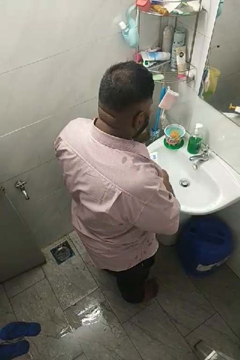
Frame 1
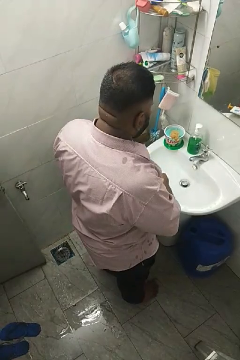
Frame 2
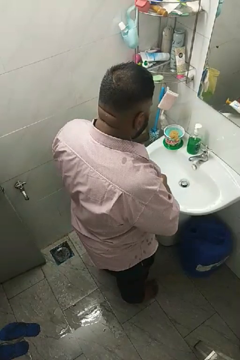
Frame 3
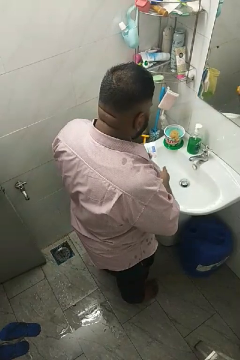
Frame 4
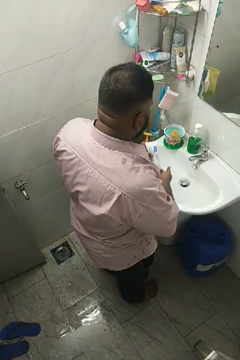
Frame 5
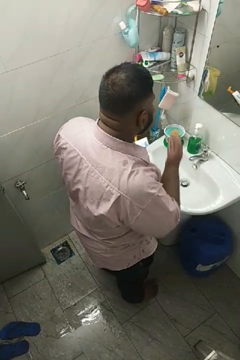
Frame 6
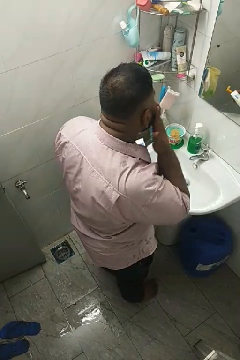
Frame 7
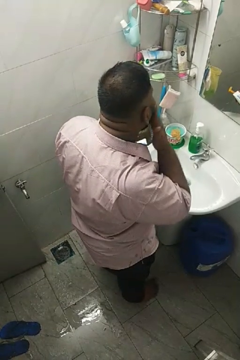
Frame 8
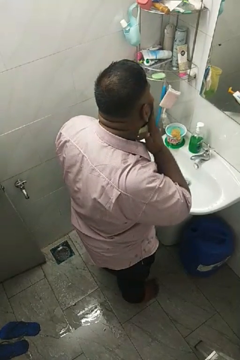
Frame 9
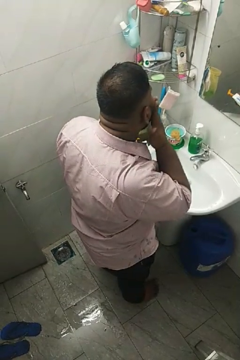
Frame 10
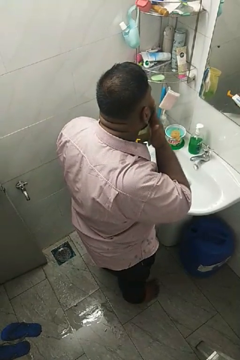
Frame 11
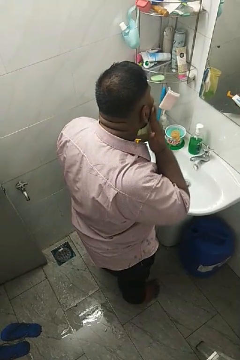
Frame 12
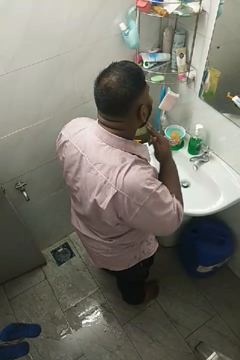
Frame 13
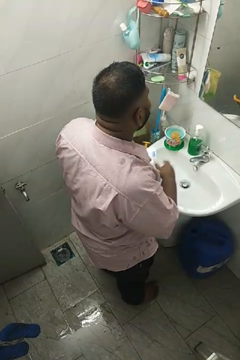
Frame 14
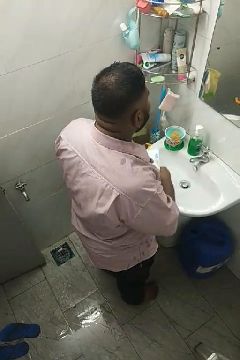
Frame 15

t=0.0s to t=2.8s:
person applies shaving cream

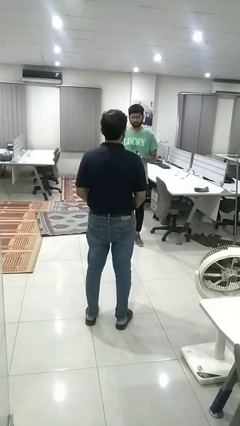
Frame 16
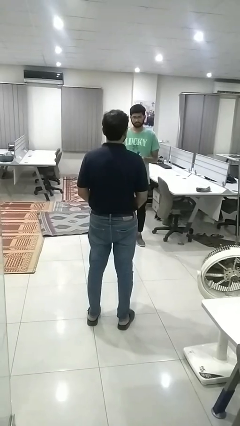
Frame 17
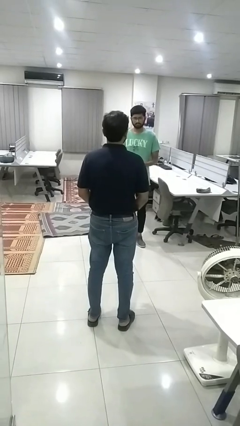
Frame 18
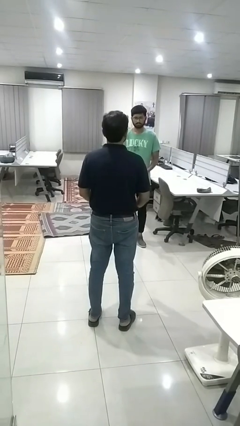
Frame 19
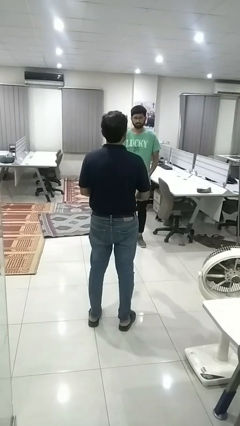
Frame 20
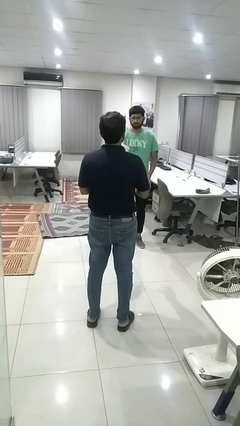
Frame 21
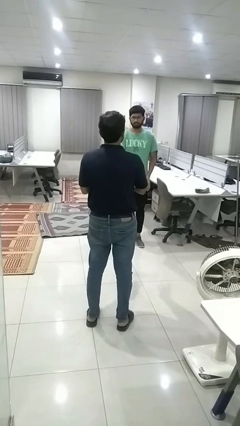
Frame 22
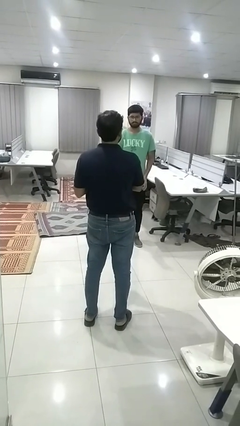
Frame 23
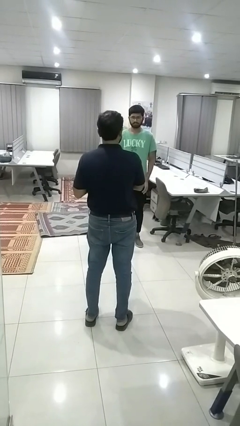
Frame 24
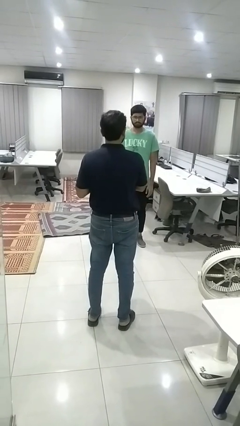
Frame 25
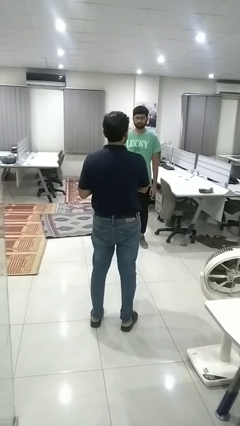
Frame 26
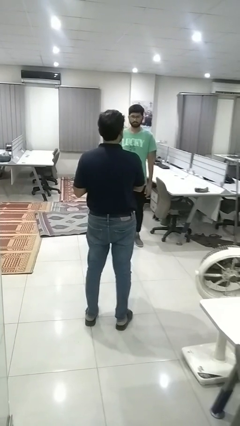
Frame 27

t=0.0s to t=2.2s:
person catches object from person

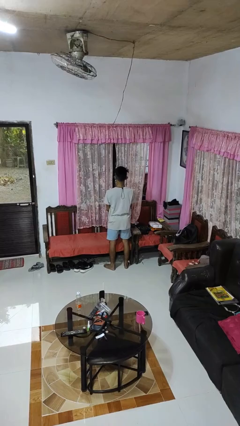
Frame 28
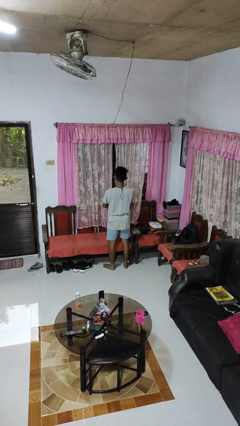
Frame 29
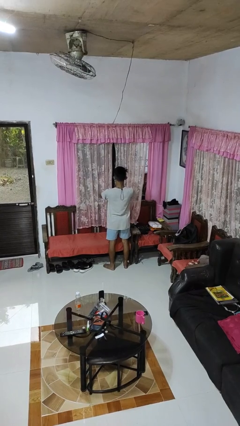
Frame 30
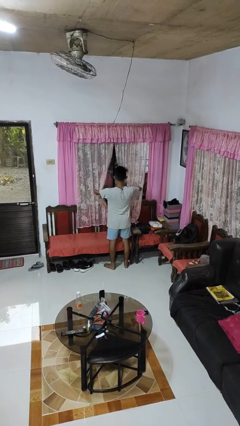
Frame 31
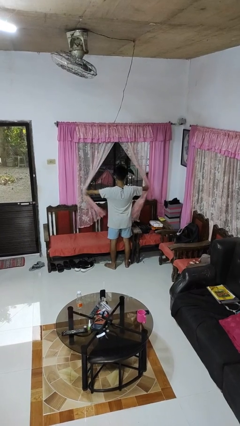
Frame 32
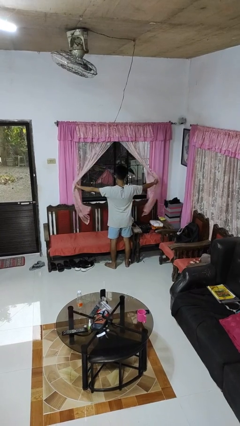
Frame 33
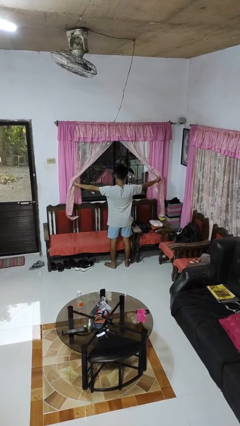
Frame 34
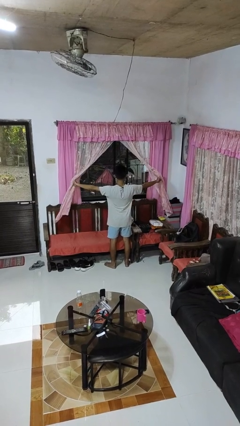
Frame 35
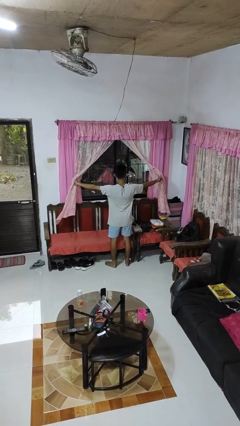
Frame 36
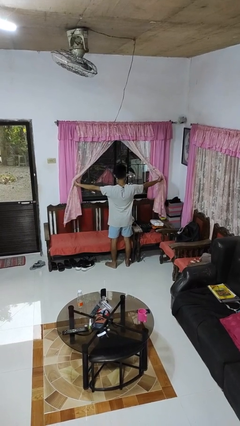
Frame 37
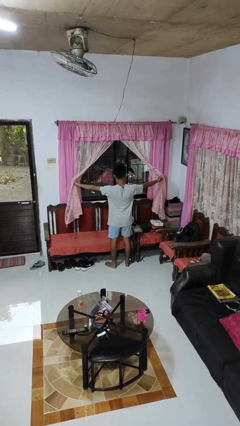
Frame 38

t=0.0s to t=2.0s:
person opens curtains

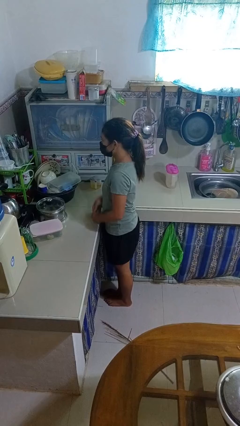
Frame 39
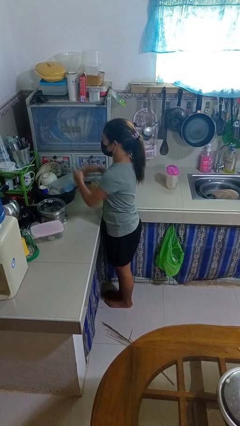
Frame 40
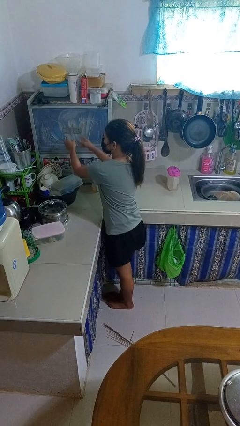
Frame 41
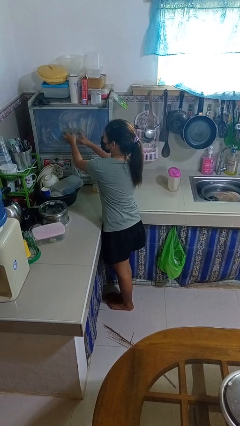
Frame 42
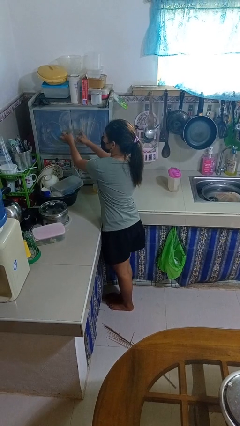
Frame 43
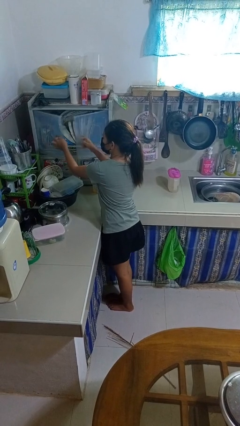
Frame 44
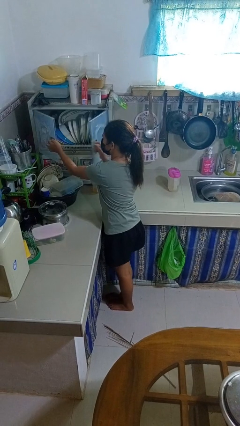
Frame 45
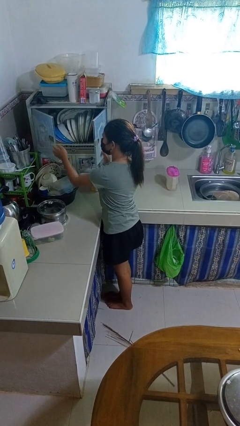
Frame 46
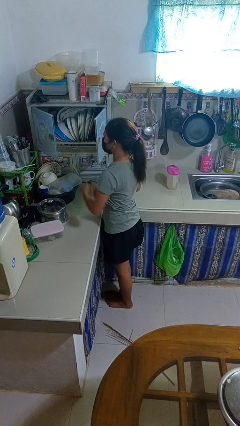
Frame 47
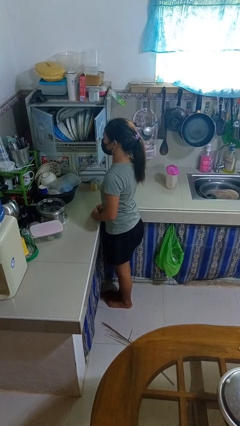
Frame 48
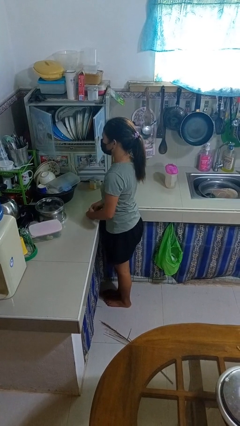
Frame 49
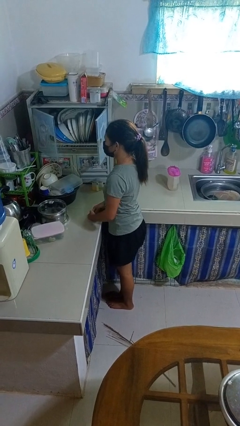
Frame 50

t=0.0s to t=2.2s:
person opens kitchen drawer

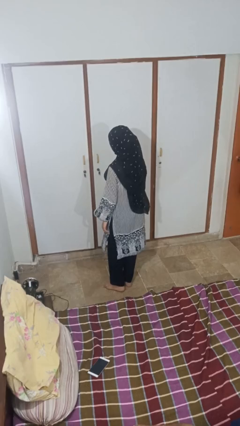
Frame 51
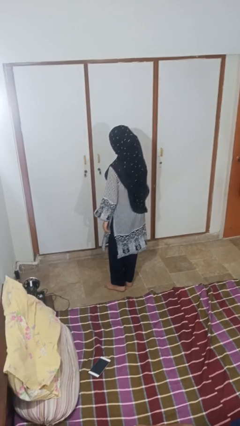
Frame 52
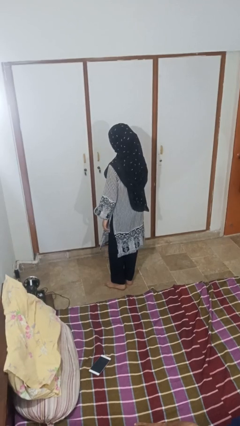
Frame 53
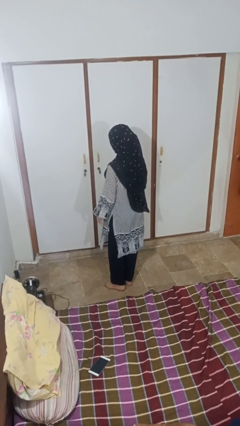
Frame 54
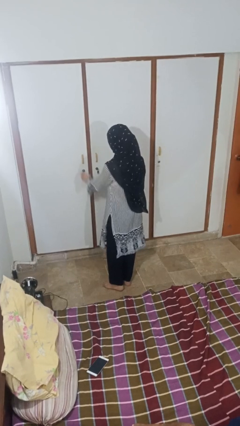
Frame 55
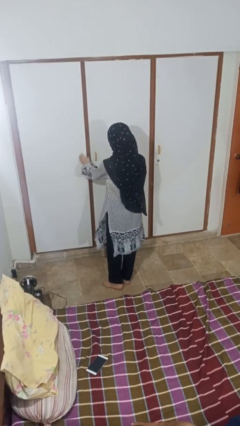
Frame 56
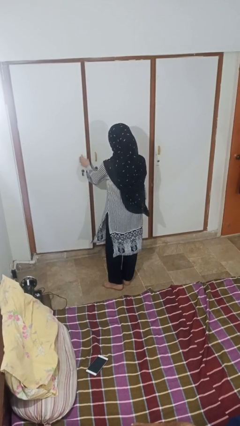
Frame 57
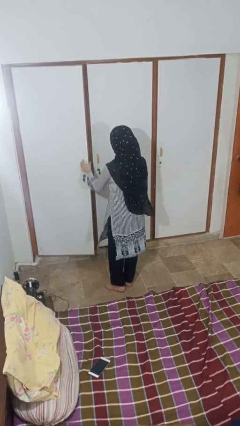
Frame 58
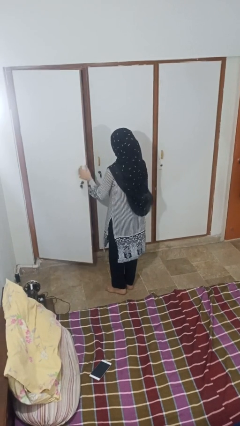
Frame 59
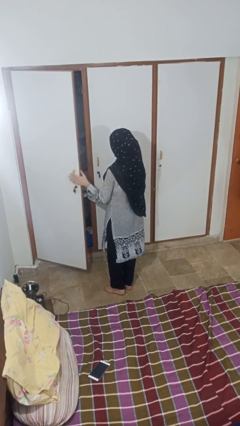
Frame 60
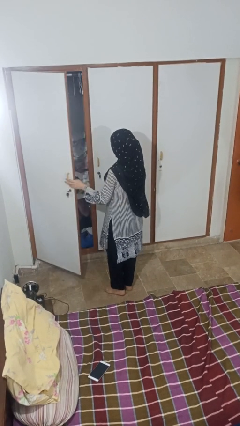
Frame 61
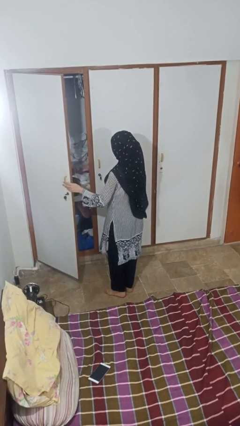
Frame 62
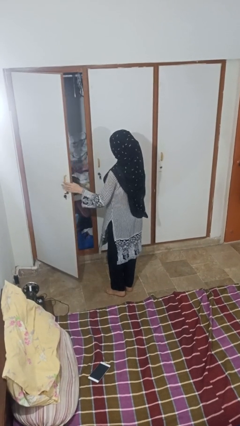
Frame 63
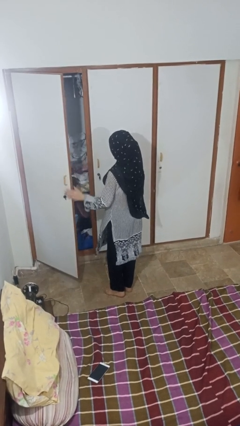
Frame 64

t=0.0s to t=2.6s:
person opens closet door

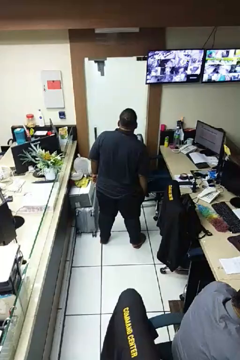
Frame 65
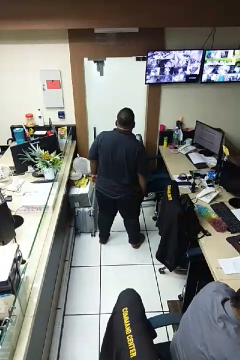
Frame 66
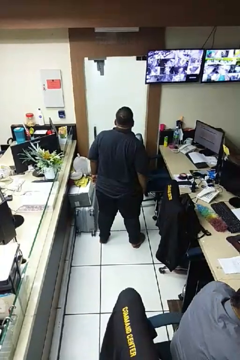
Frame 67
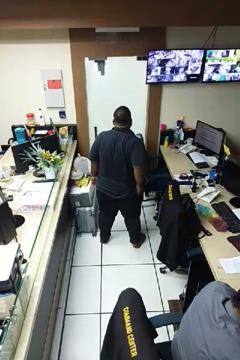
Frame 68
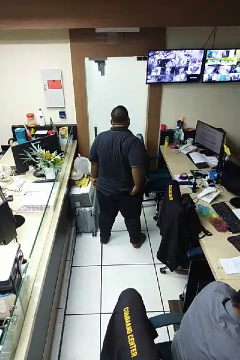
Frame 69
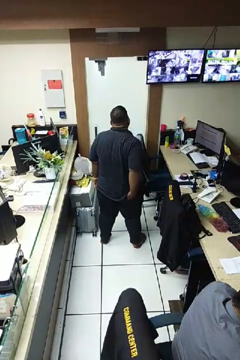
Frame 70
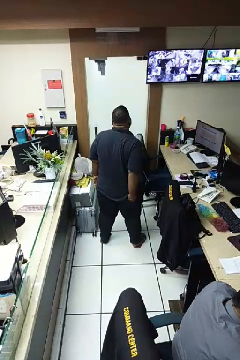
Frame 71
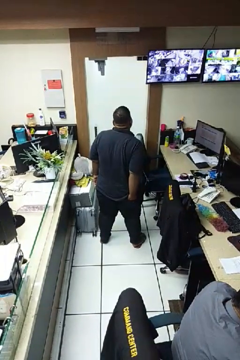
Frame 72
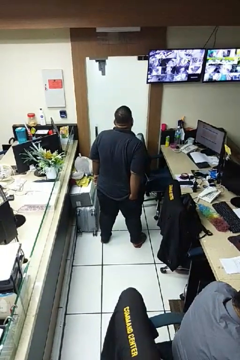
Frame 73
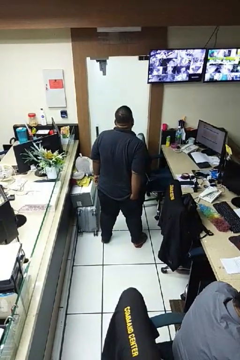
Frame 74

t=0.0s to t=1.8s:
person puts hands in back pockets

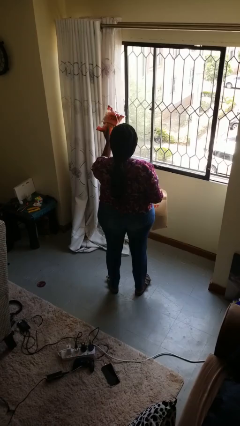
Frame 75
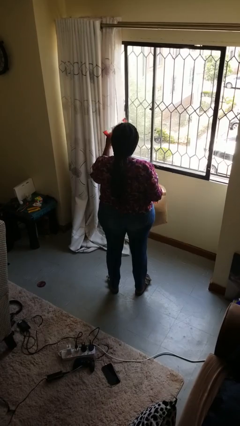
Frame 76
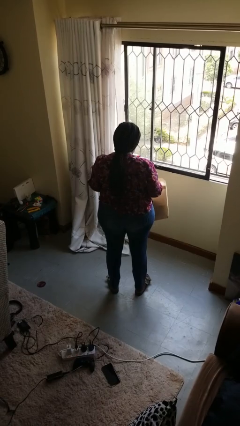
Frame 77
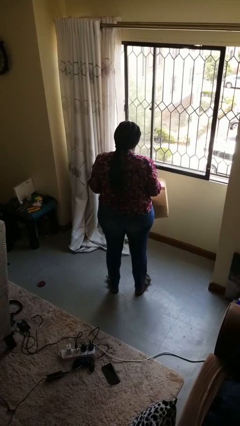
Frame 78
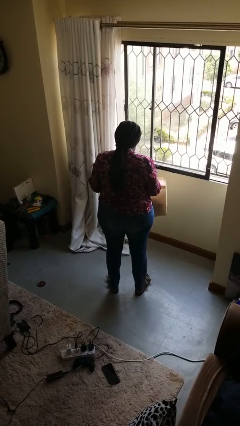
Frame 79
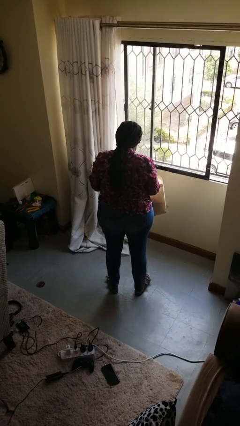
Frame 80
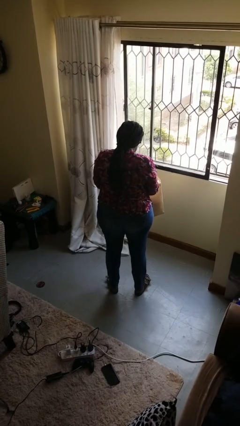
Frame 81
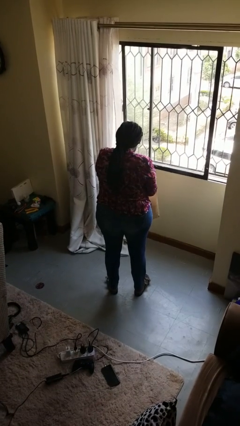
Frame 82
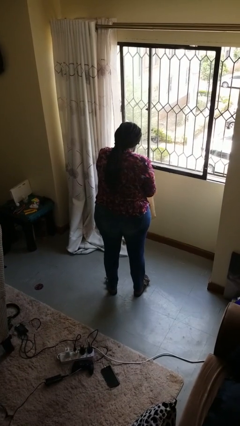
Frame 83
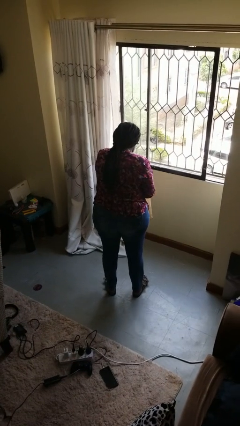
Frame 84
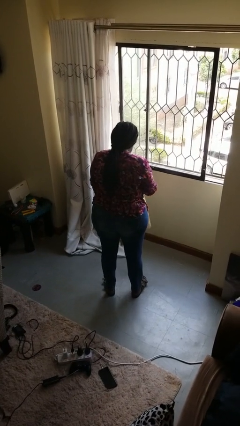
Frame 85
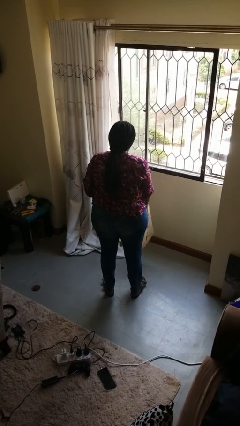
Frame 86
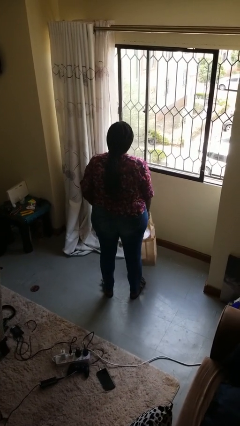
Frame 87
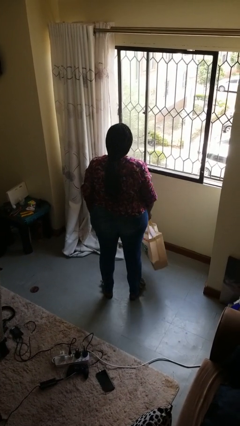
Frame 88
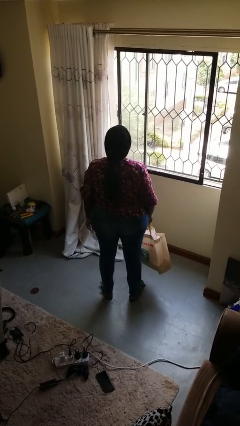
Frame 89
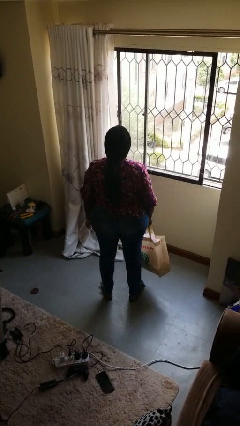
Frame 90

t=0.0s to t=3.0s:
person puts object into bag

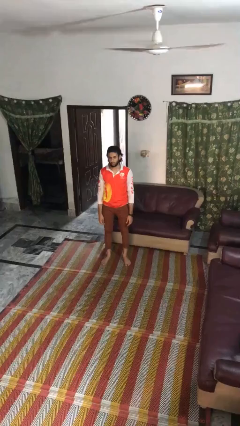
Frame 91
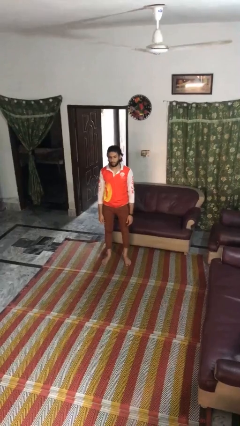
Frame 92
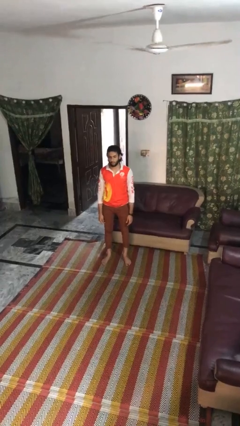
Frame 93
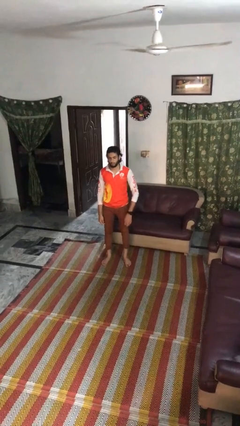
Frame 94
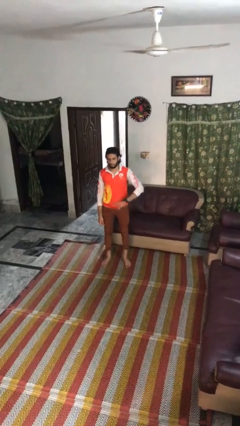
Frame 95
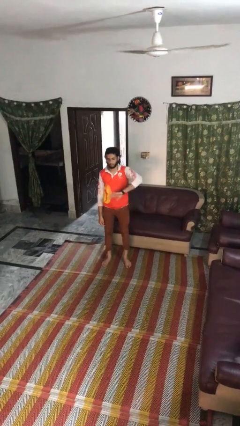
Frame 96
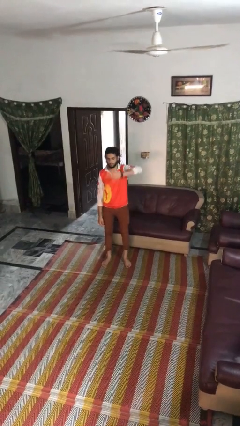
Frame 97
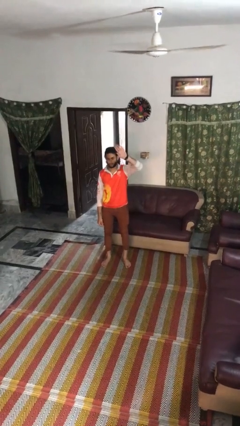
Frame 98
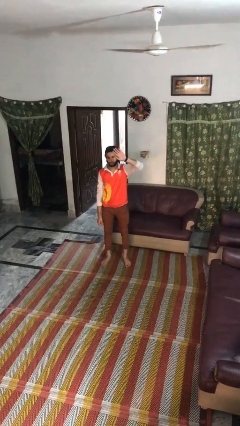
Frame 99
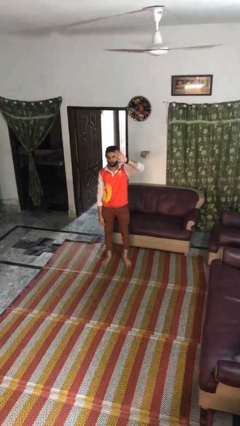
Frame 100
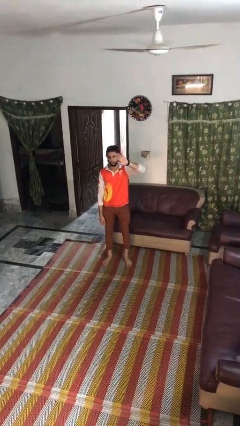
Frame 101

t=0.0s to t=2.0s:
person gestures swipe up
